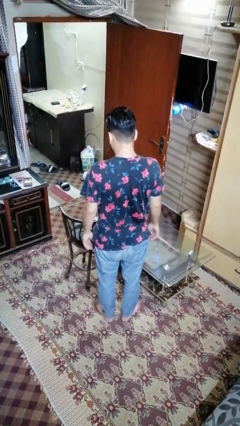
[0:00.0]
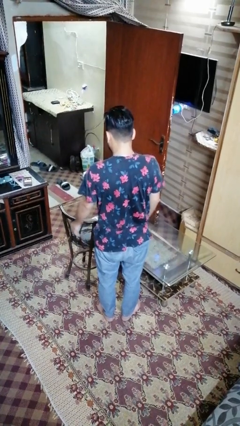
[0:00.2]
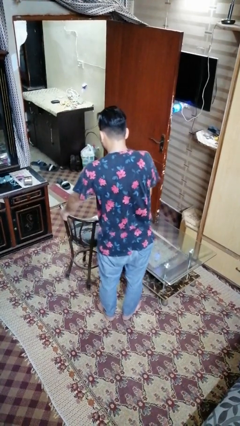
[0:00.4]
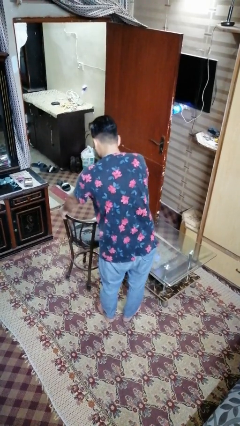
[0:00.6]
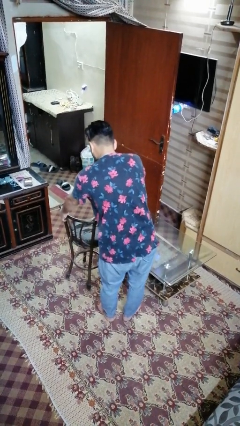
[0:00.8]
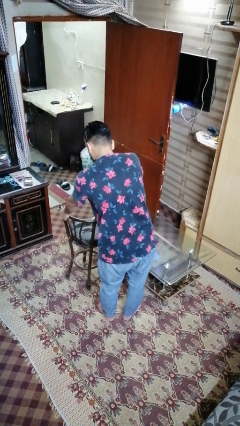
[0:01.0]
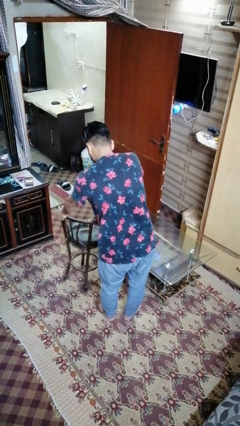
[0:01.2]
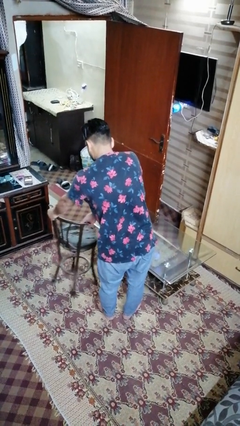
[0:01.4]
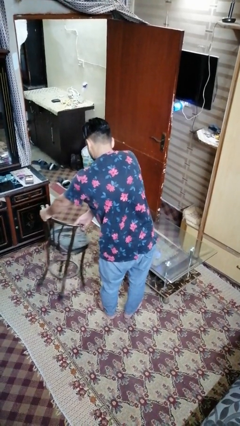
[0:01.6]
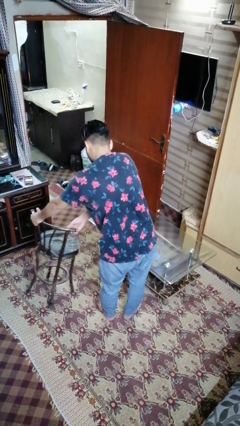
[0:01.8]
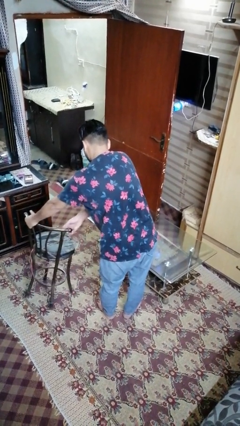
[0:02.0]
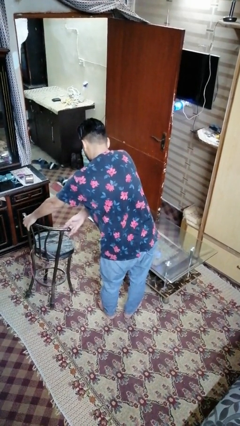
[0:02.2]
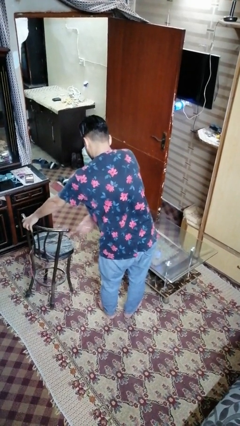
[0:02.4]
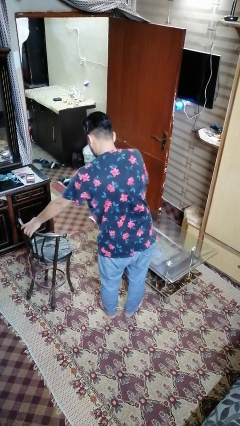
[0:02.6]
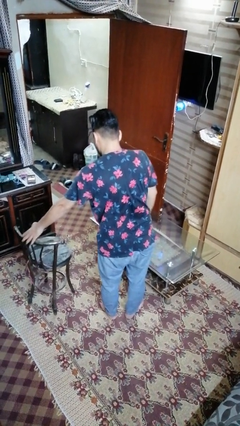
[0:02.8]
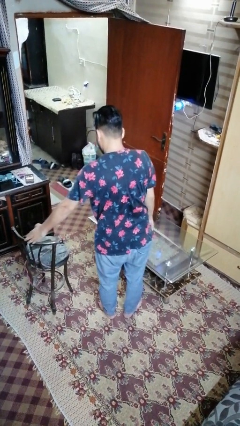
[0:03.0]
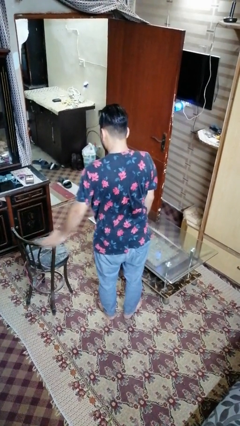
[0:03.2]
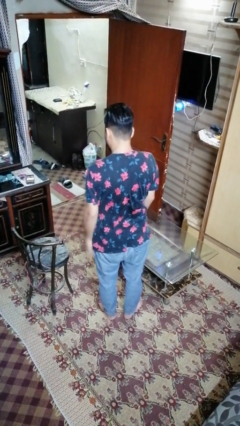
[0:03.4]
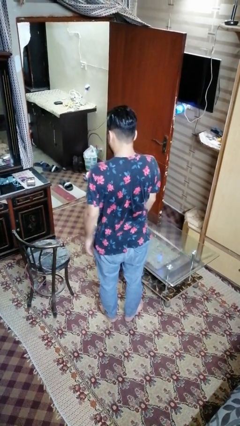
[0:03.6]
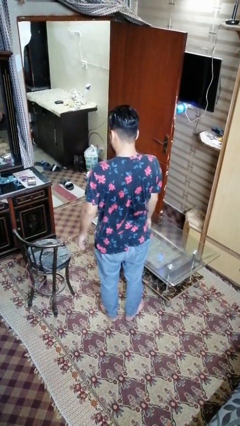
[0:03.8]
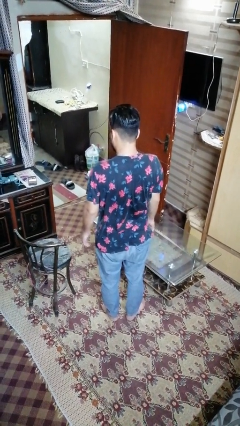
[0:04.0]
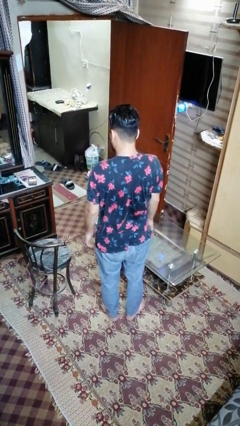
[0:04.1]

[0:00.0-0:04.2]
person pulls out chair

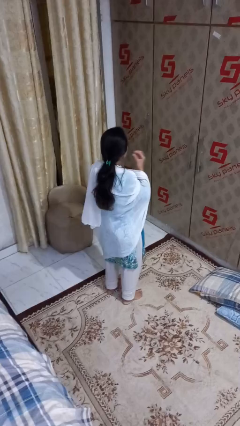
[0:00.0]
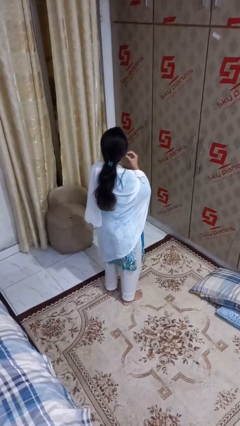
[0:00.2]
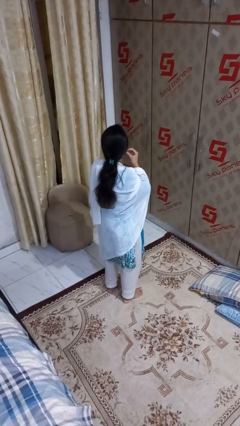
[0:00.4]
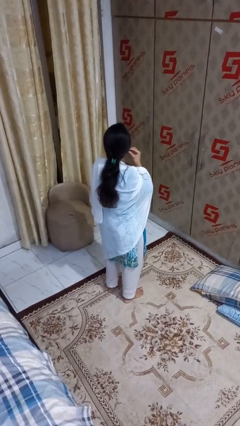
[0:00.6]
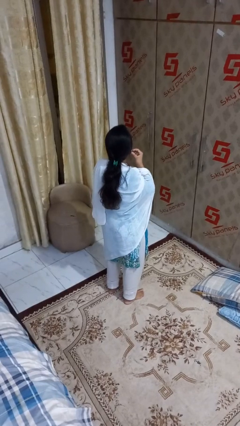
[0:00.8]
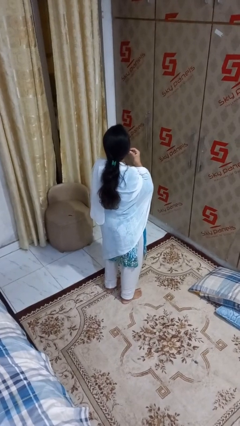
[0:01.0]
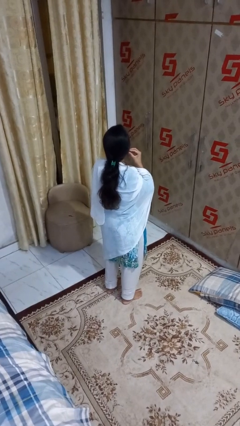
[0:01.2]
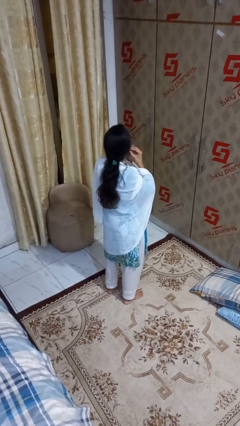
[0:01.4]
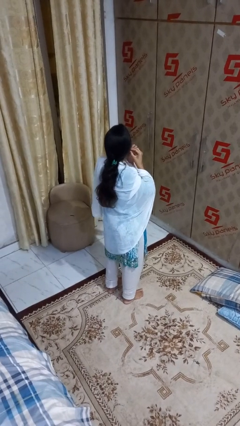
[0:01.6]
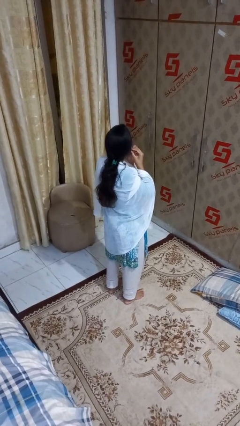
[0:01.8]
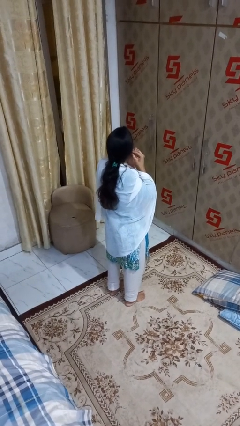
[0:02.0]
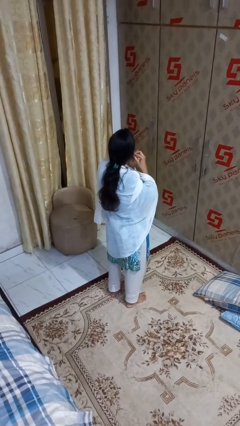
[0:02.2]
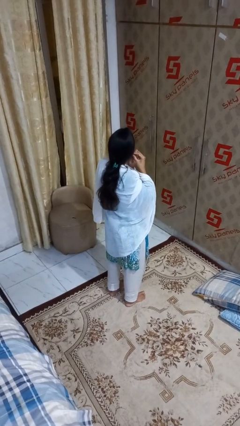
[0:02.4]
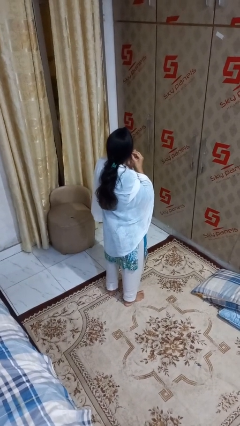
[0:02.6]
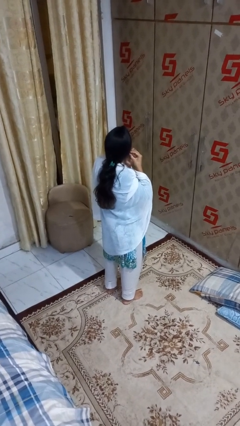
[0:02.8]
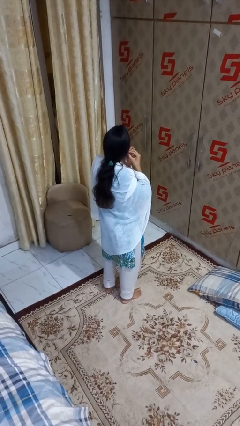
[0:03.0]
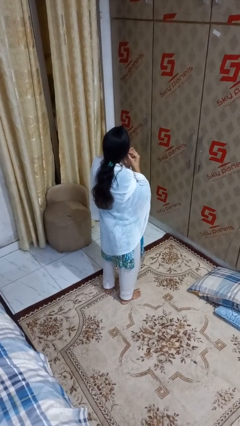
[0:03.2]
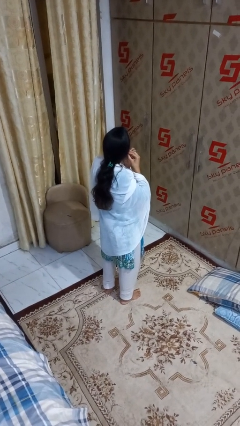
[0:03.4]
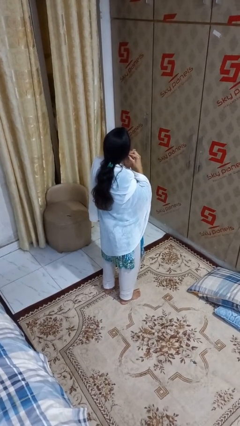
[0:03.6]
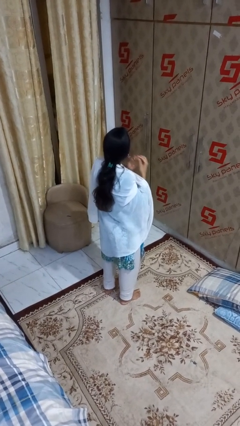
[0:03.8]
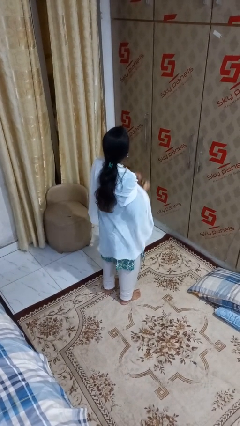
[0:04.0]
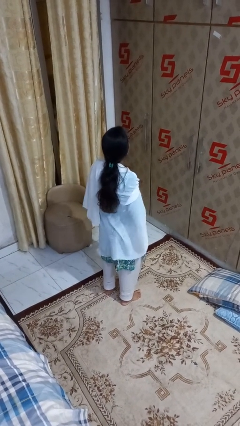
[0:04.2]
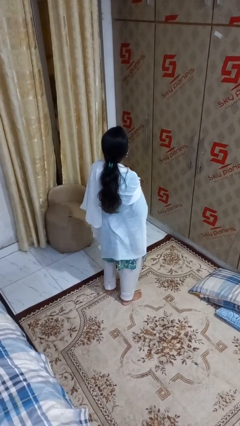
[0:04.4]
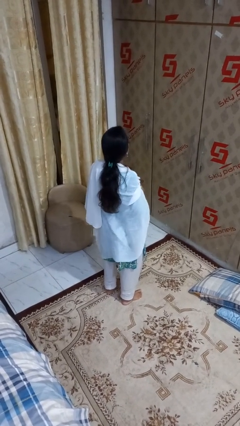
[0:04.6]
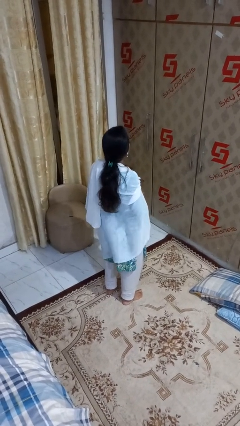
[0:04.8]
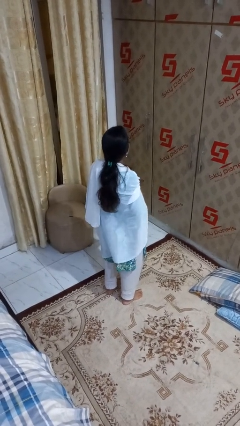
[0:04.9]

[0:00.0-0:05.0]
person puts on earrings

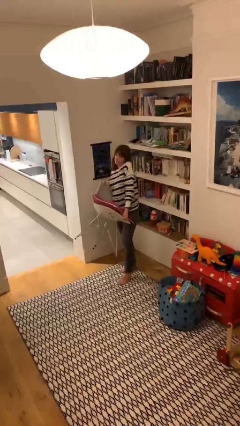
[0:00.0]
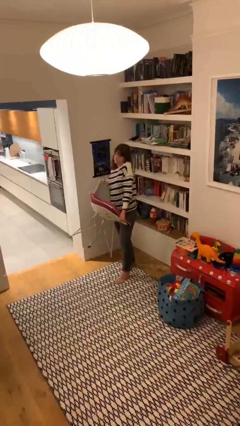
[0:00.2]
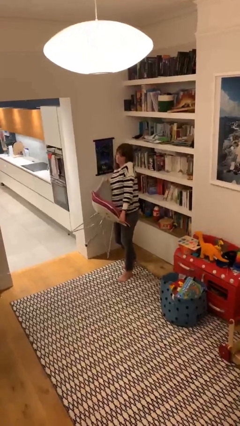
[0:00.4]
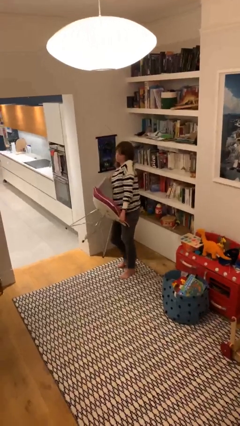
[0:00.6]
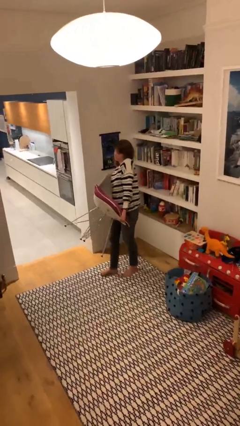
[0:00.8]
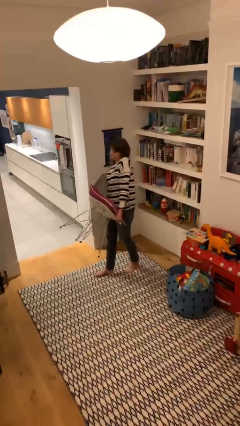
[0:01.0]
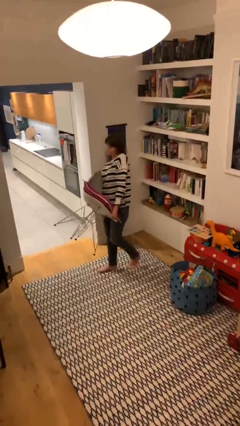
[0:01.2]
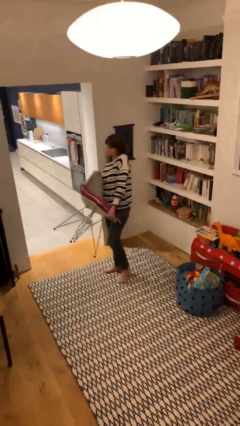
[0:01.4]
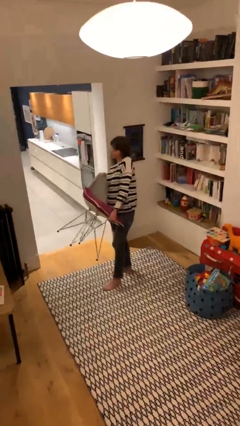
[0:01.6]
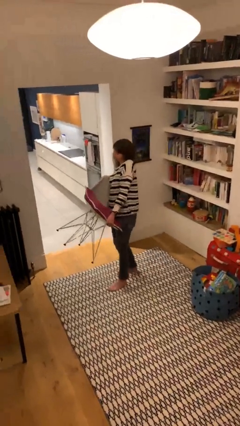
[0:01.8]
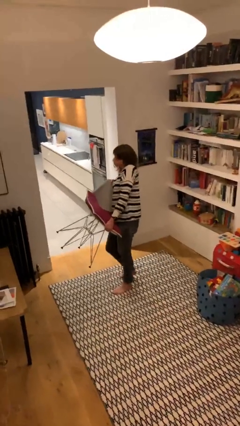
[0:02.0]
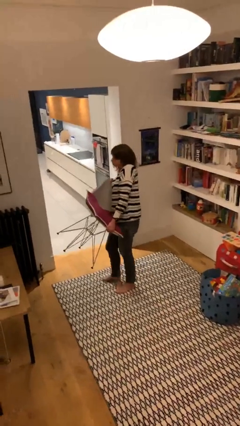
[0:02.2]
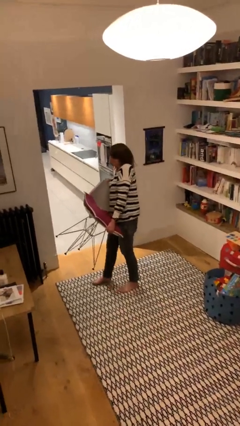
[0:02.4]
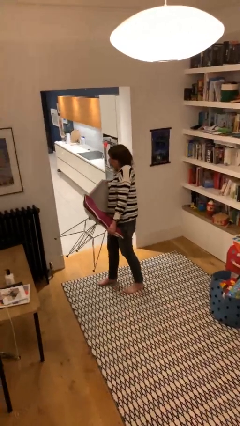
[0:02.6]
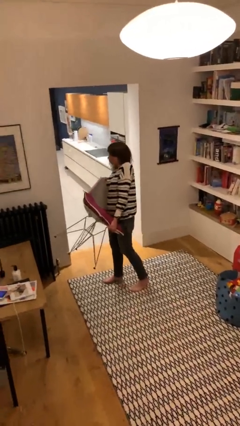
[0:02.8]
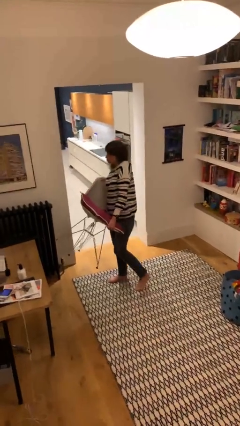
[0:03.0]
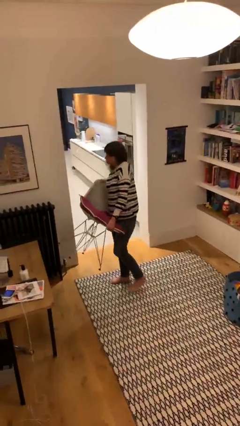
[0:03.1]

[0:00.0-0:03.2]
person carries heavy object

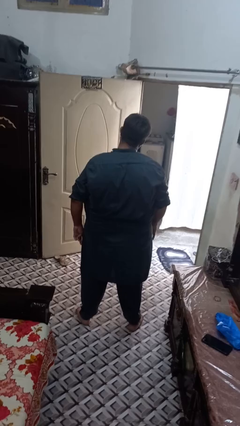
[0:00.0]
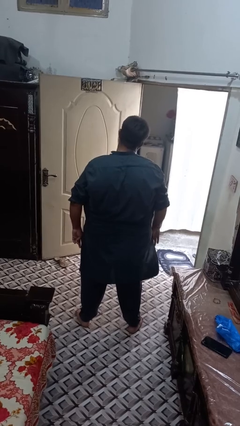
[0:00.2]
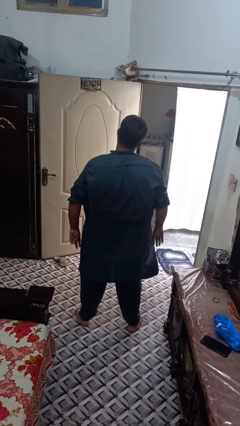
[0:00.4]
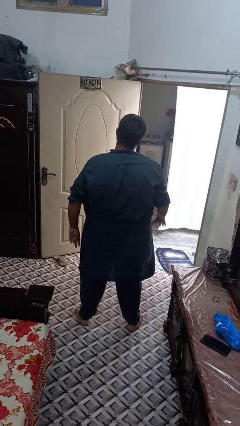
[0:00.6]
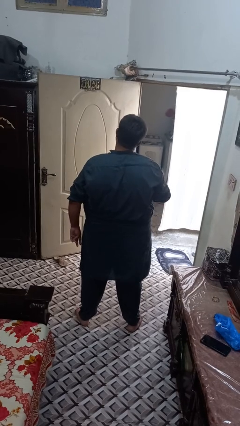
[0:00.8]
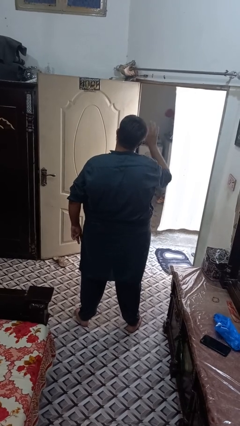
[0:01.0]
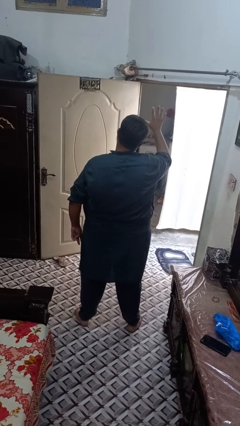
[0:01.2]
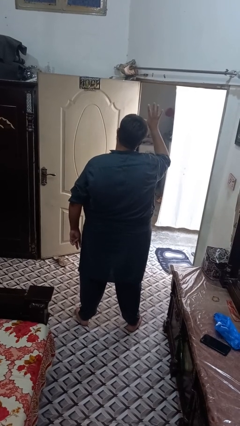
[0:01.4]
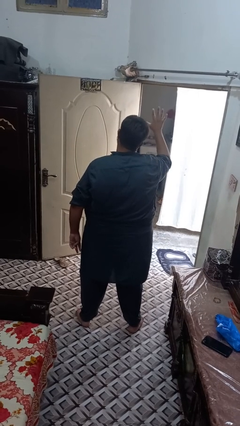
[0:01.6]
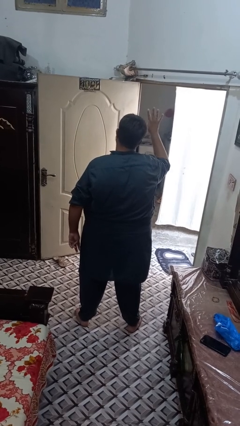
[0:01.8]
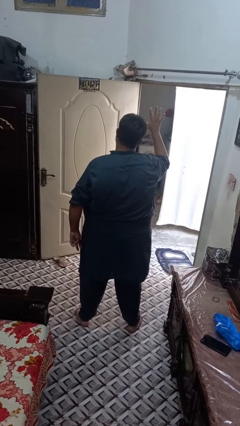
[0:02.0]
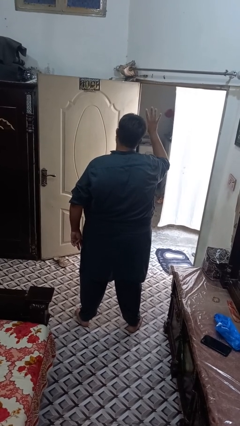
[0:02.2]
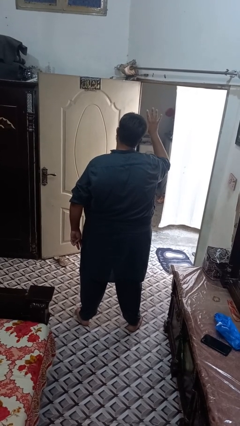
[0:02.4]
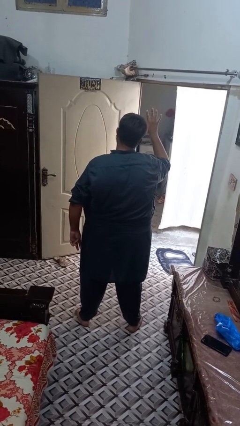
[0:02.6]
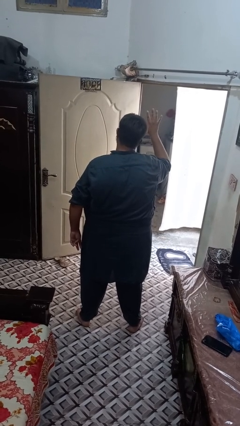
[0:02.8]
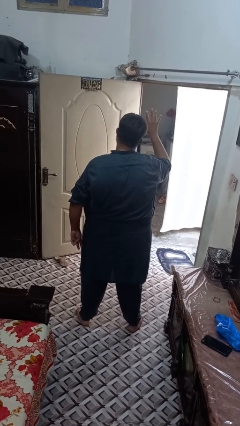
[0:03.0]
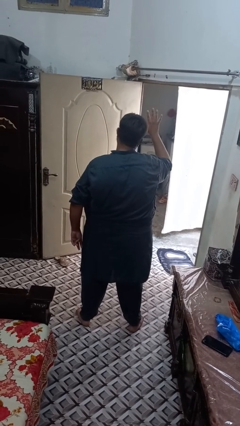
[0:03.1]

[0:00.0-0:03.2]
person gestures number five

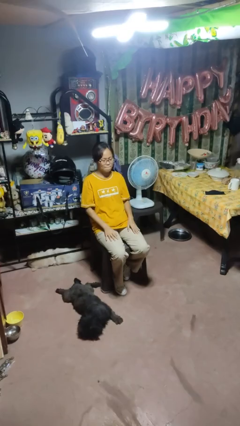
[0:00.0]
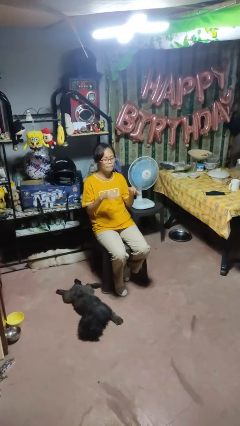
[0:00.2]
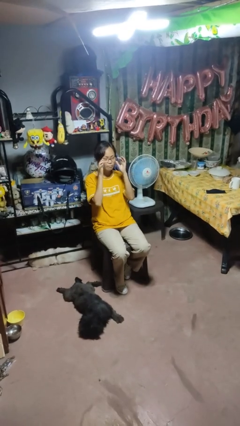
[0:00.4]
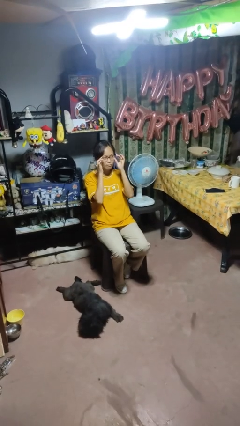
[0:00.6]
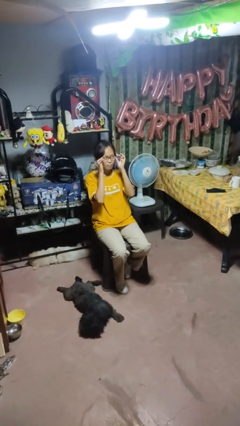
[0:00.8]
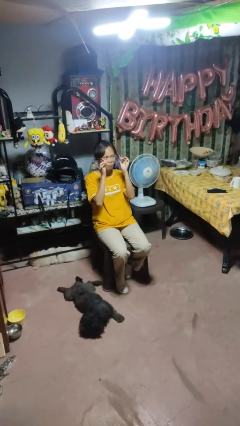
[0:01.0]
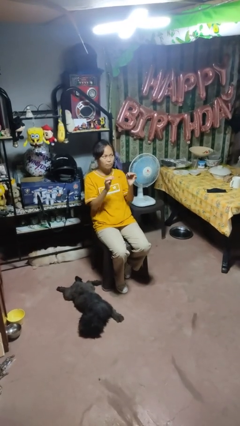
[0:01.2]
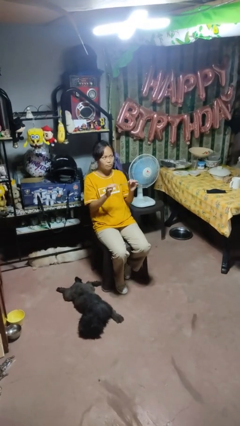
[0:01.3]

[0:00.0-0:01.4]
person takes off glasses

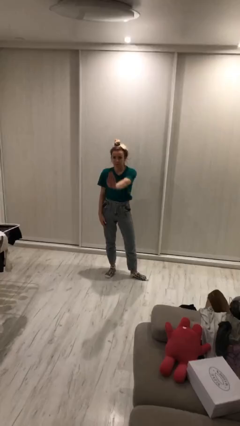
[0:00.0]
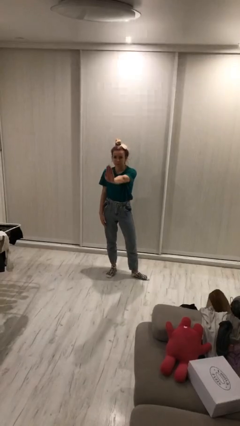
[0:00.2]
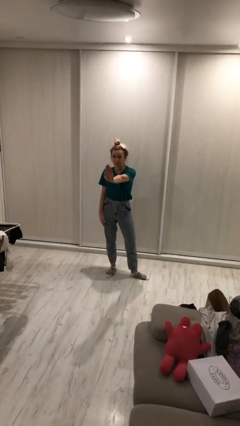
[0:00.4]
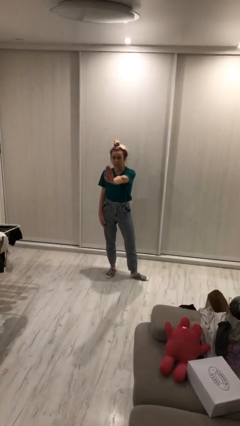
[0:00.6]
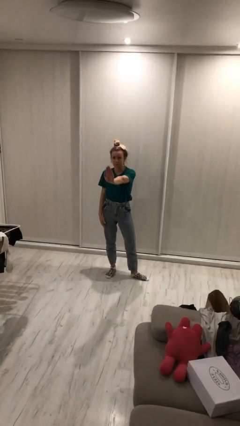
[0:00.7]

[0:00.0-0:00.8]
person gestures stop

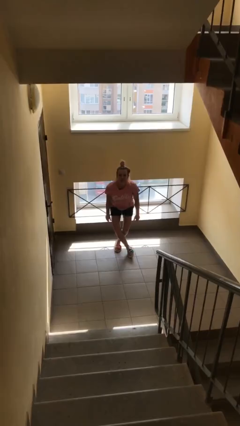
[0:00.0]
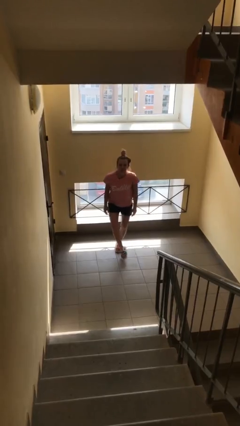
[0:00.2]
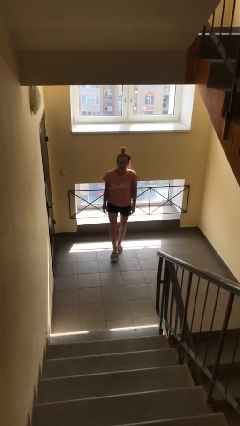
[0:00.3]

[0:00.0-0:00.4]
person stands up from floor
